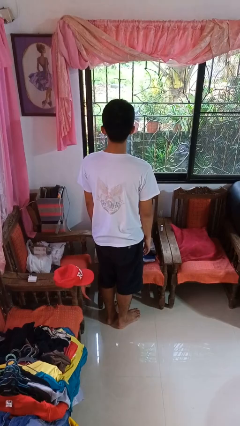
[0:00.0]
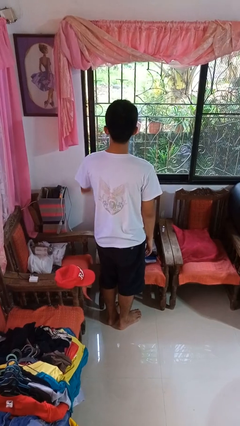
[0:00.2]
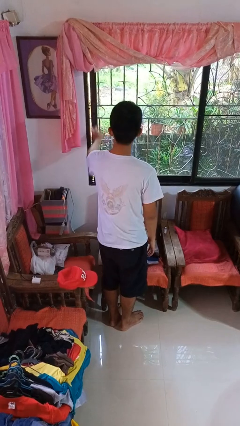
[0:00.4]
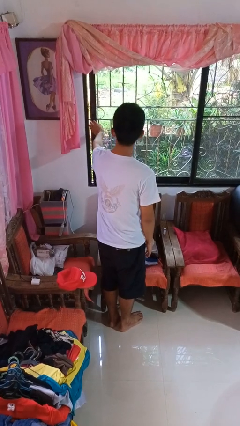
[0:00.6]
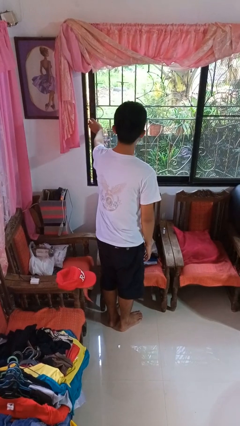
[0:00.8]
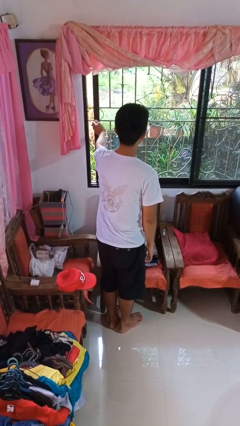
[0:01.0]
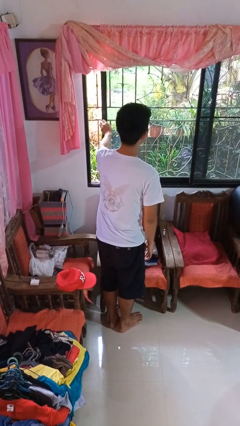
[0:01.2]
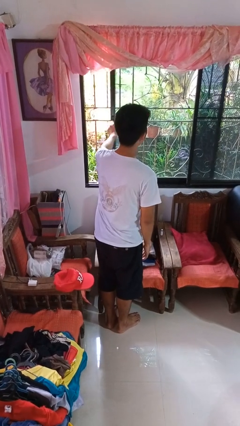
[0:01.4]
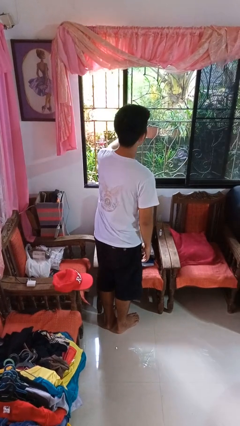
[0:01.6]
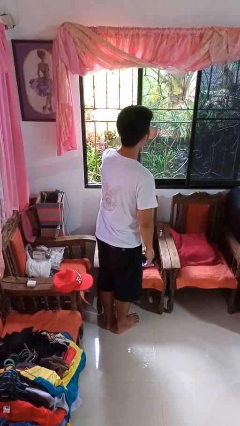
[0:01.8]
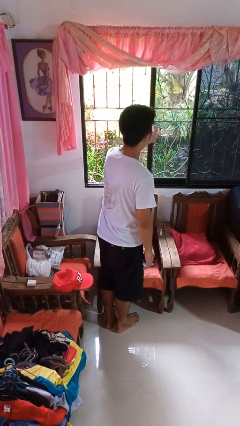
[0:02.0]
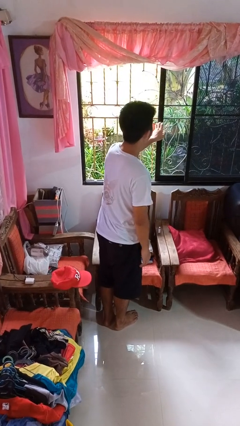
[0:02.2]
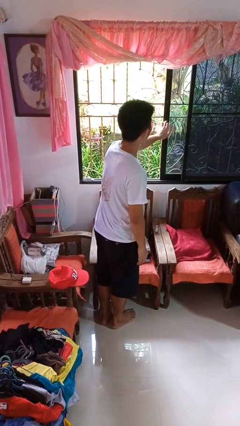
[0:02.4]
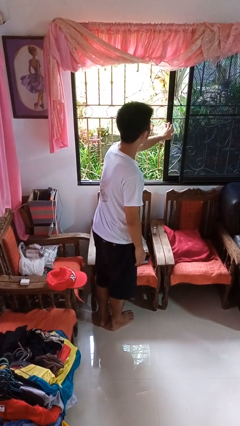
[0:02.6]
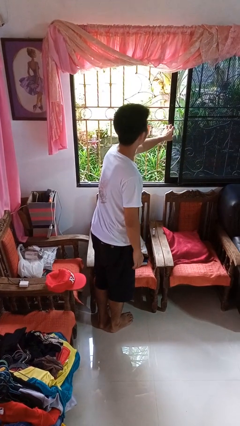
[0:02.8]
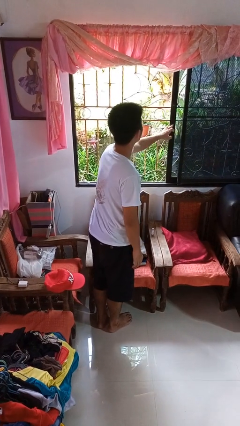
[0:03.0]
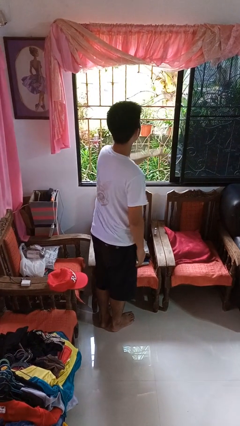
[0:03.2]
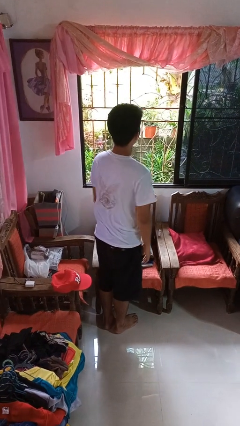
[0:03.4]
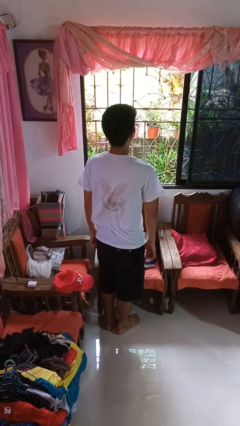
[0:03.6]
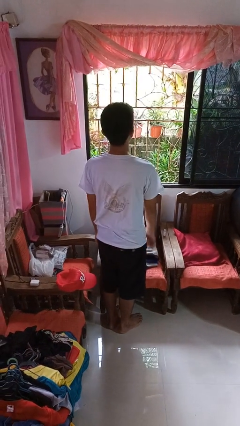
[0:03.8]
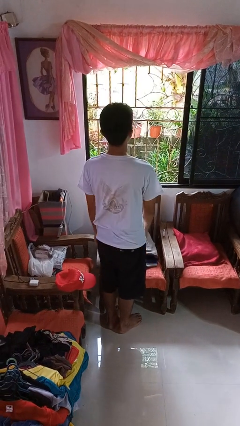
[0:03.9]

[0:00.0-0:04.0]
person opens home window

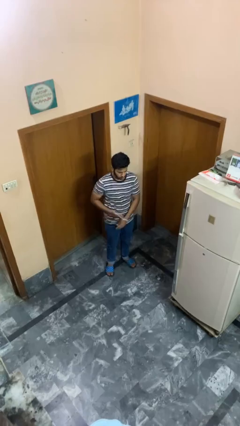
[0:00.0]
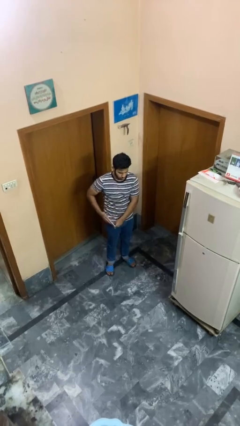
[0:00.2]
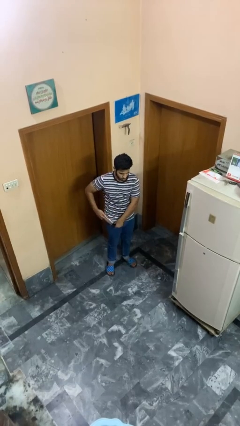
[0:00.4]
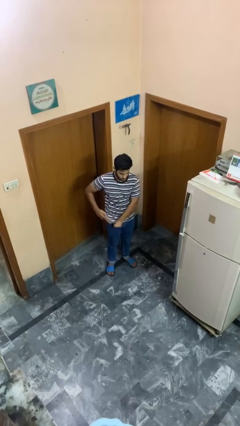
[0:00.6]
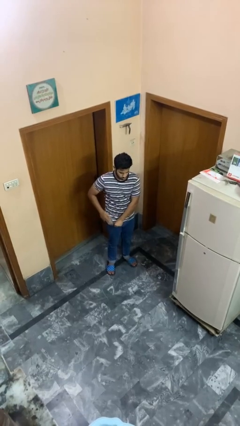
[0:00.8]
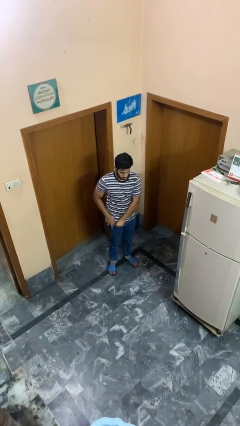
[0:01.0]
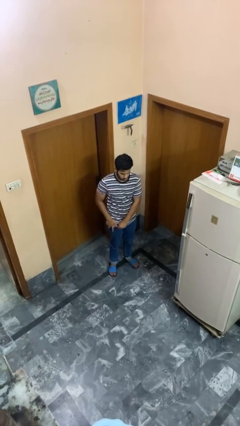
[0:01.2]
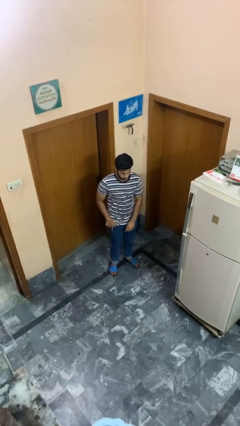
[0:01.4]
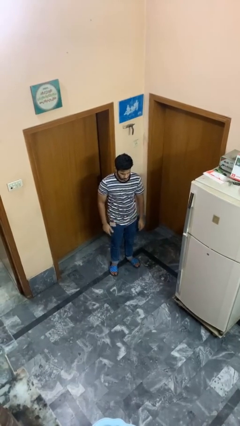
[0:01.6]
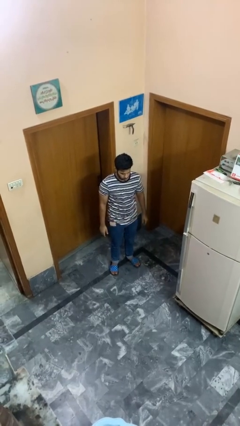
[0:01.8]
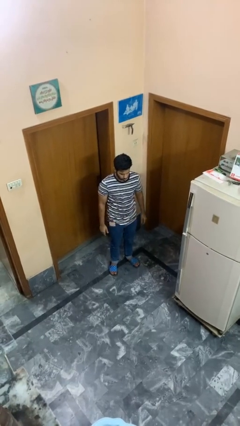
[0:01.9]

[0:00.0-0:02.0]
person puts phone into pocket

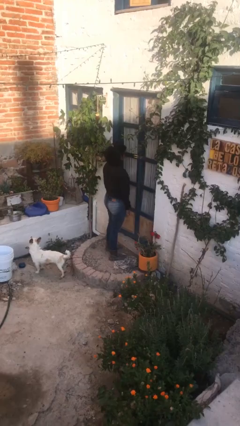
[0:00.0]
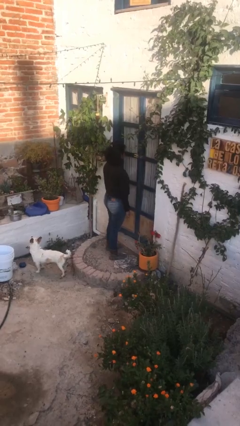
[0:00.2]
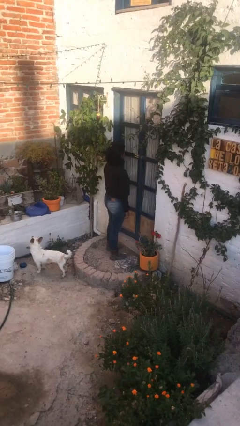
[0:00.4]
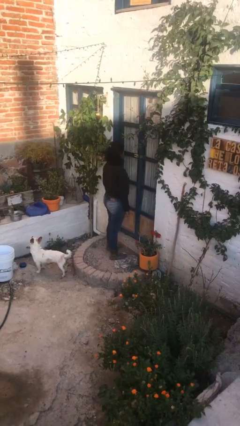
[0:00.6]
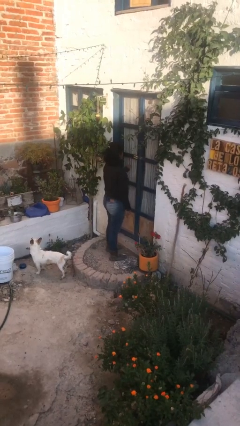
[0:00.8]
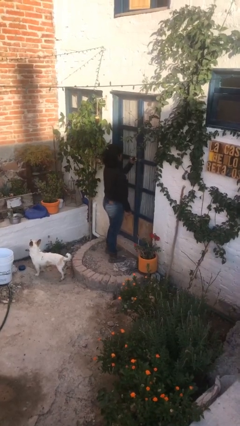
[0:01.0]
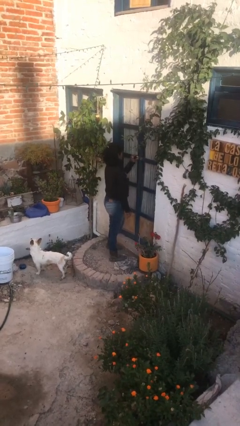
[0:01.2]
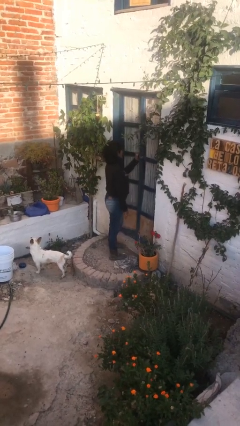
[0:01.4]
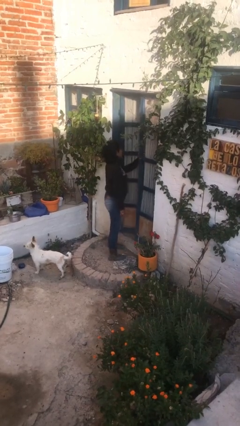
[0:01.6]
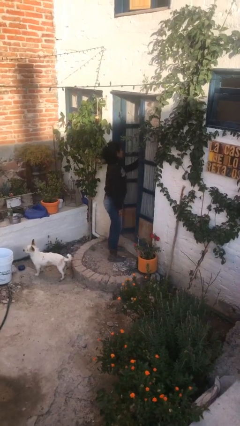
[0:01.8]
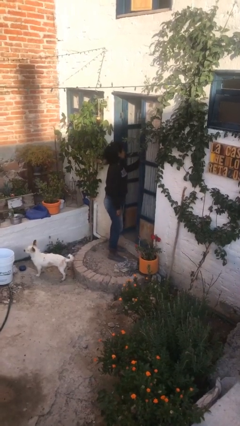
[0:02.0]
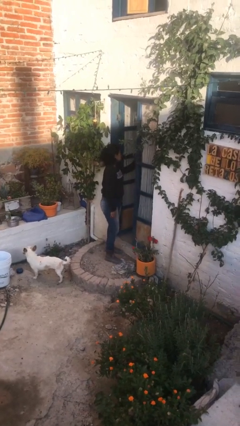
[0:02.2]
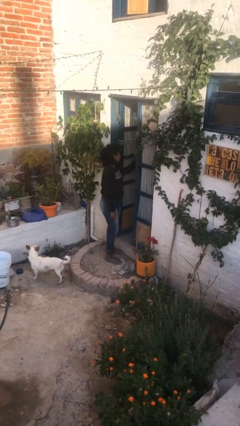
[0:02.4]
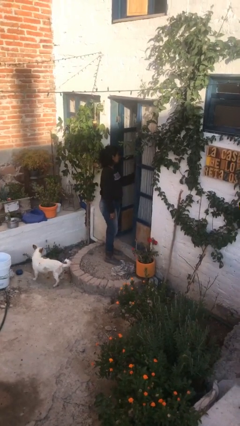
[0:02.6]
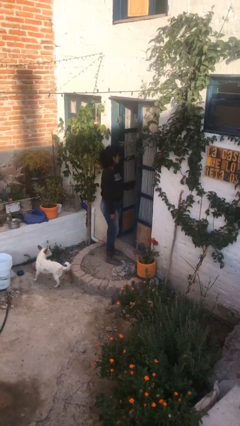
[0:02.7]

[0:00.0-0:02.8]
person opens facility door

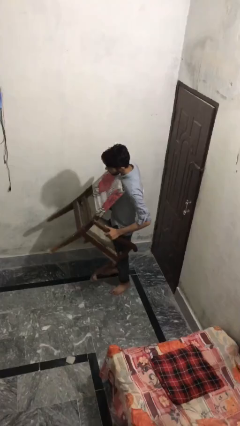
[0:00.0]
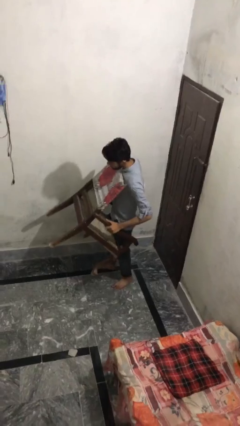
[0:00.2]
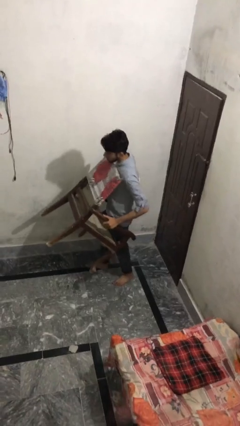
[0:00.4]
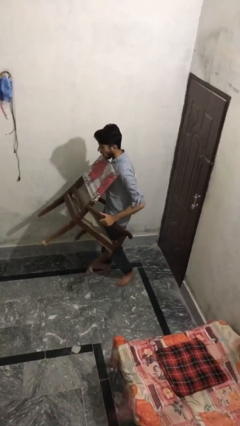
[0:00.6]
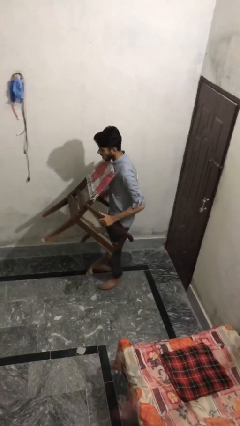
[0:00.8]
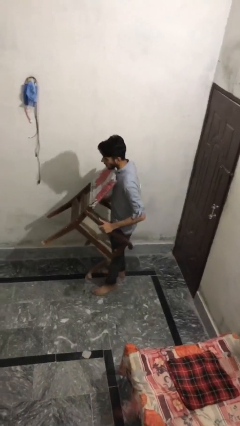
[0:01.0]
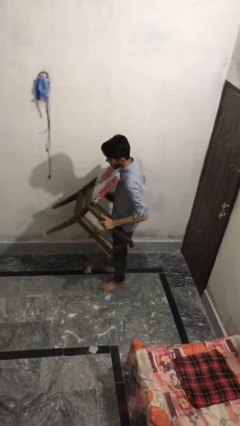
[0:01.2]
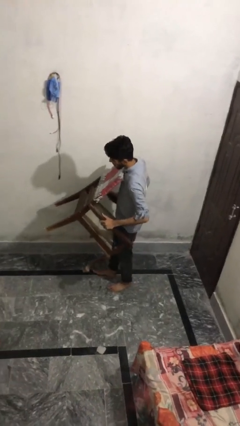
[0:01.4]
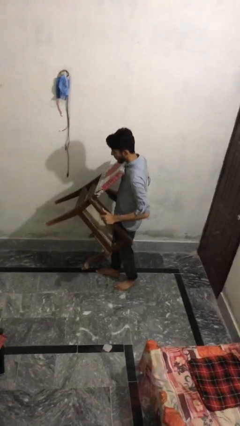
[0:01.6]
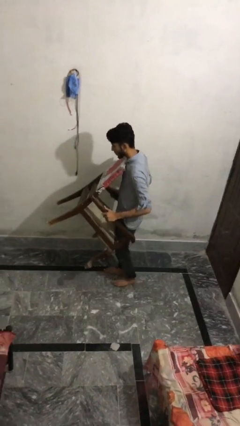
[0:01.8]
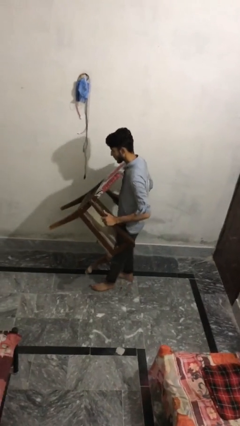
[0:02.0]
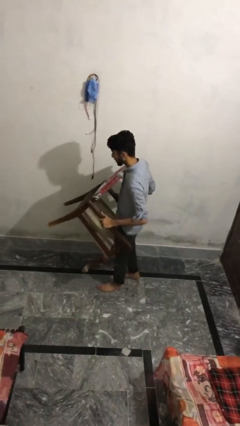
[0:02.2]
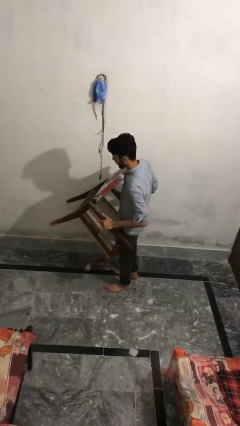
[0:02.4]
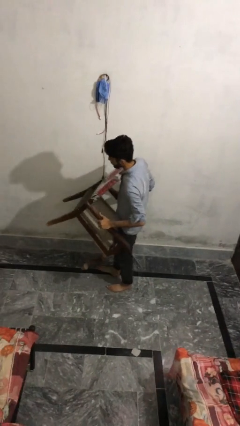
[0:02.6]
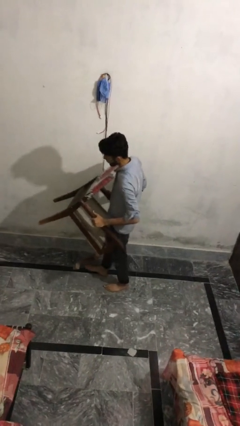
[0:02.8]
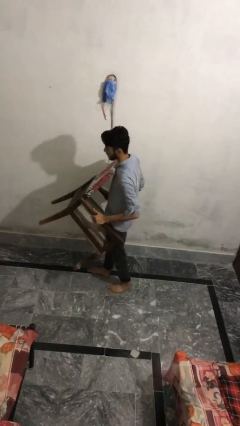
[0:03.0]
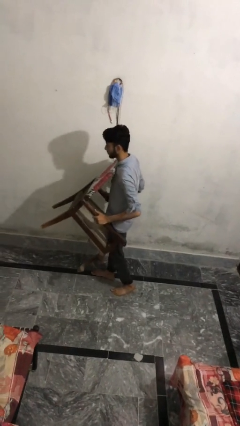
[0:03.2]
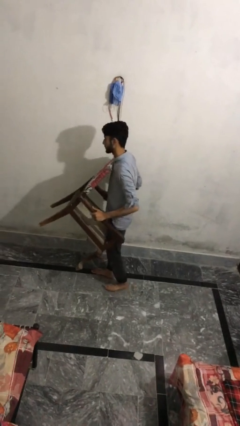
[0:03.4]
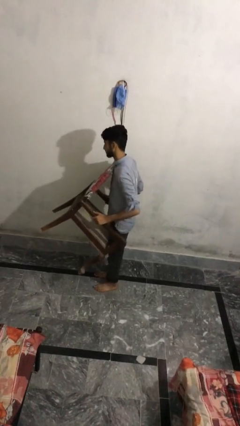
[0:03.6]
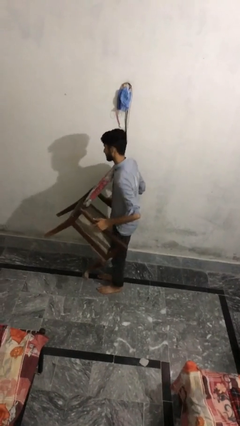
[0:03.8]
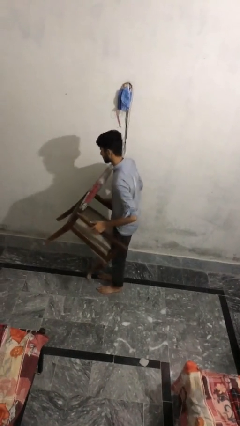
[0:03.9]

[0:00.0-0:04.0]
person carries heavy object

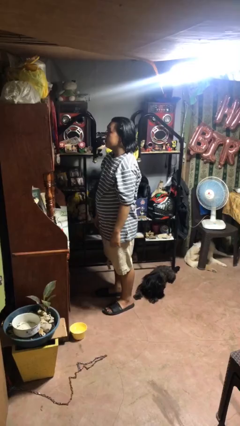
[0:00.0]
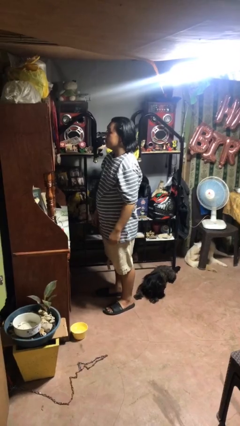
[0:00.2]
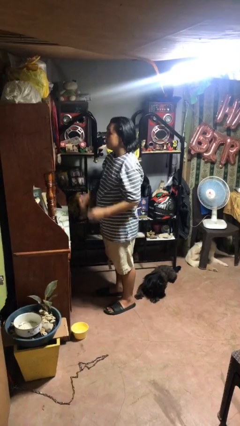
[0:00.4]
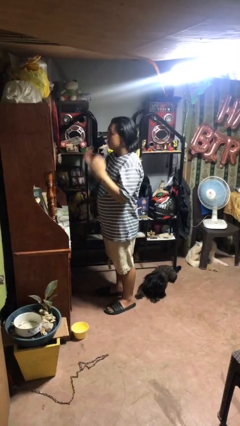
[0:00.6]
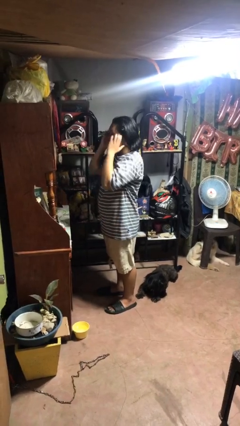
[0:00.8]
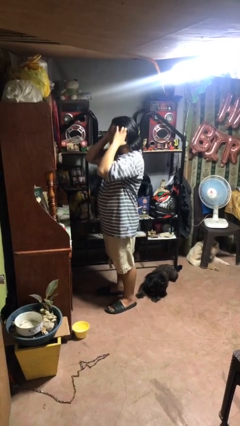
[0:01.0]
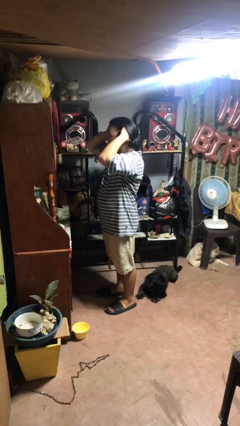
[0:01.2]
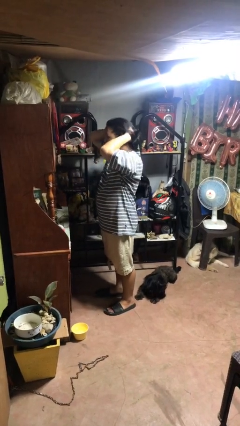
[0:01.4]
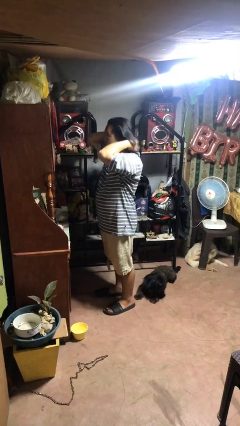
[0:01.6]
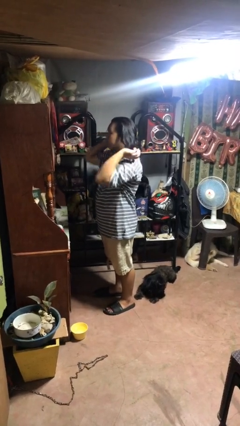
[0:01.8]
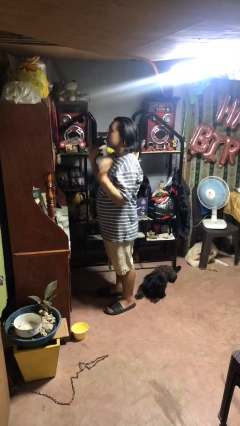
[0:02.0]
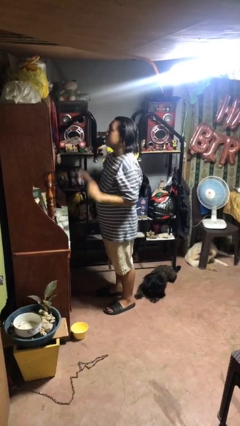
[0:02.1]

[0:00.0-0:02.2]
person strokes hair

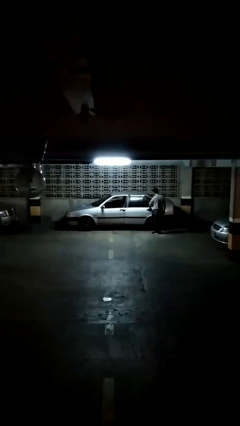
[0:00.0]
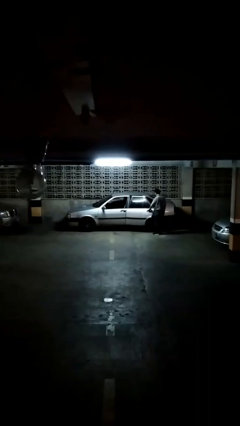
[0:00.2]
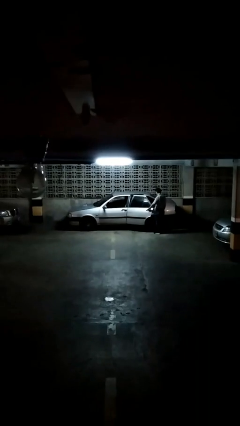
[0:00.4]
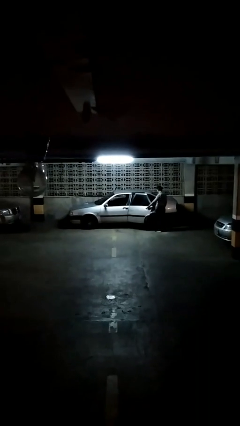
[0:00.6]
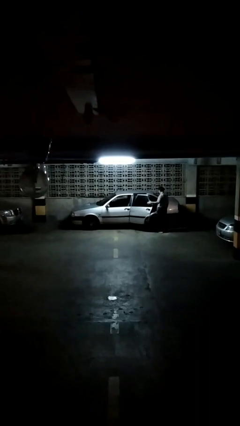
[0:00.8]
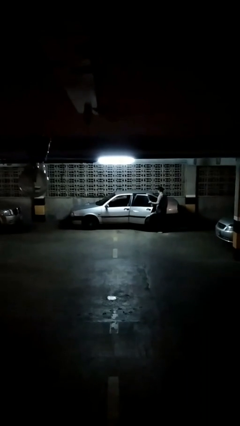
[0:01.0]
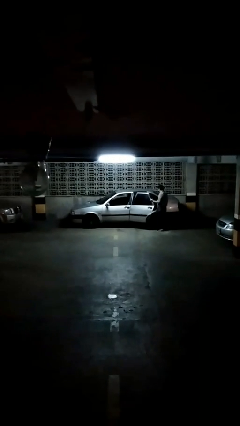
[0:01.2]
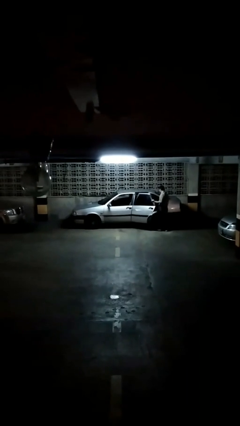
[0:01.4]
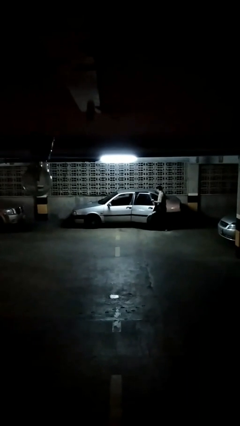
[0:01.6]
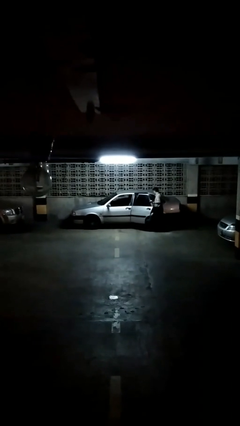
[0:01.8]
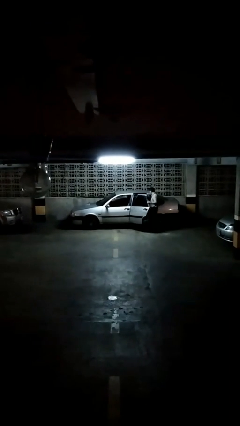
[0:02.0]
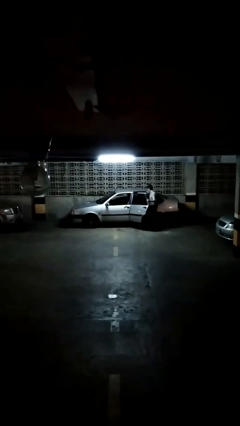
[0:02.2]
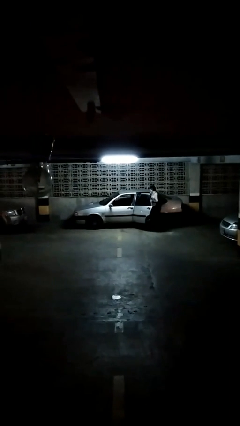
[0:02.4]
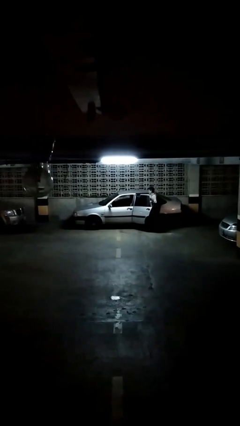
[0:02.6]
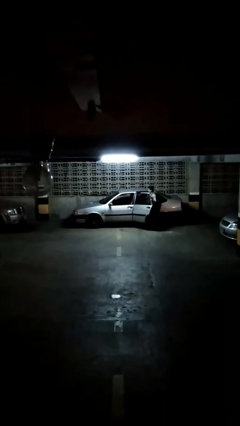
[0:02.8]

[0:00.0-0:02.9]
car picks up person

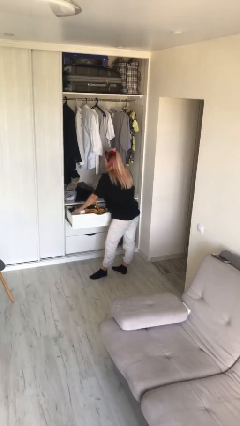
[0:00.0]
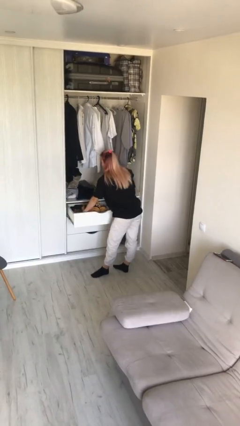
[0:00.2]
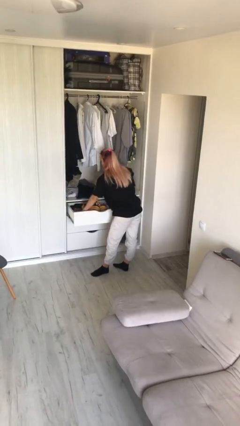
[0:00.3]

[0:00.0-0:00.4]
person puts clothes into dresser
